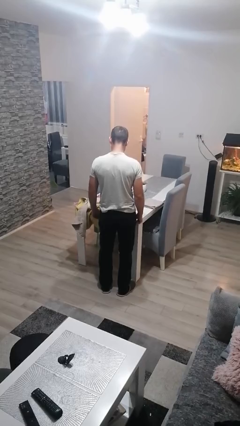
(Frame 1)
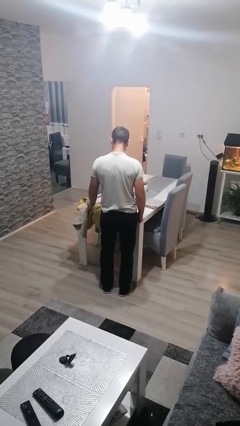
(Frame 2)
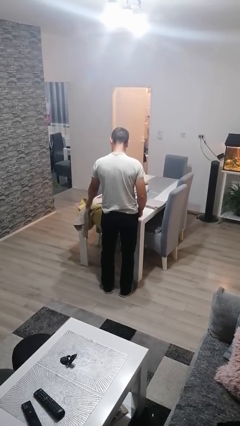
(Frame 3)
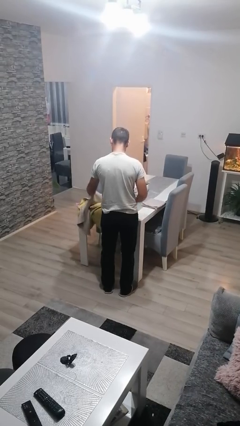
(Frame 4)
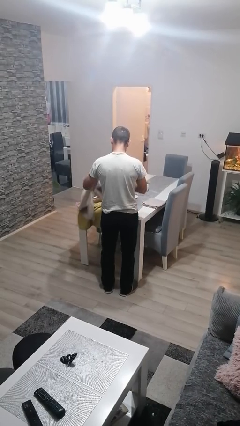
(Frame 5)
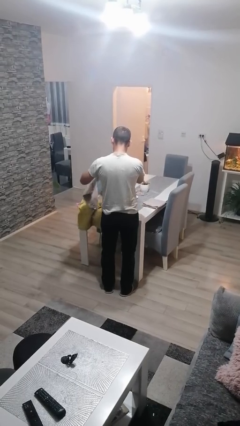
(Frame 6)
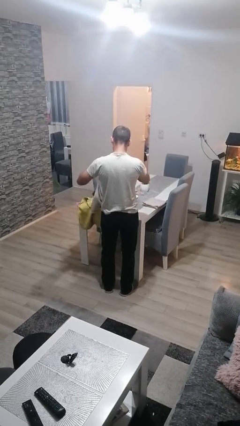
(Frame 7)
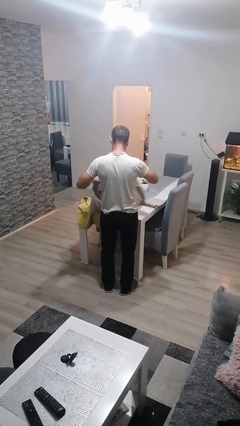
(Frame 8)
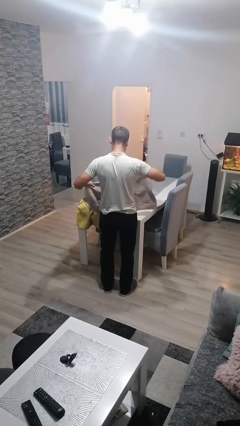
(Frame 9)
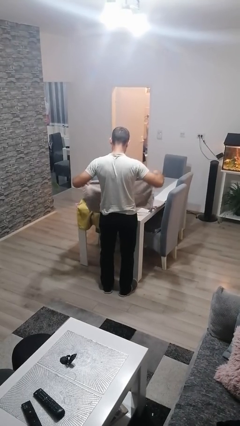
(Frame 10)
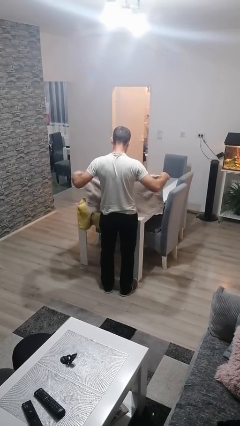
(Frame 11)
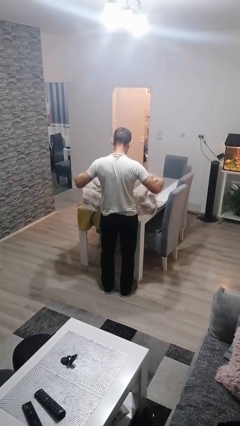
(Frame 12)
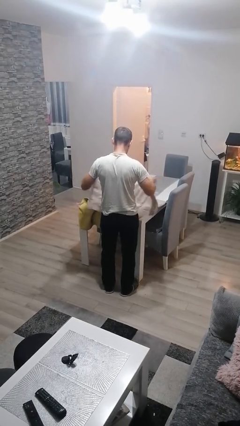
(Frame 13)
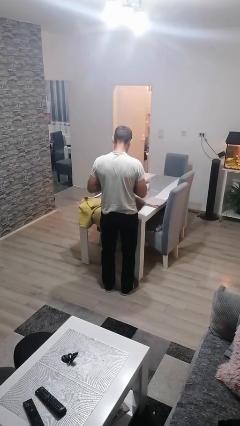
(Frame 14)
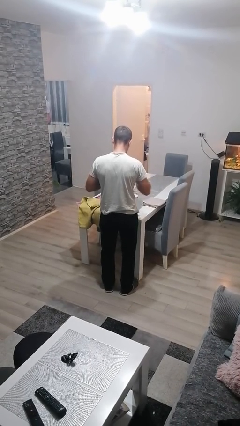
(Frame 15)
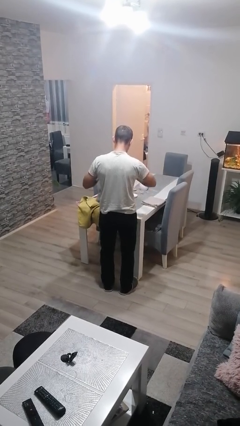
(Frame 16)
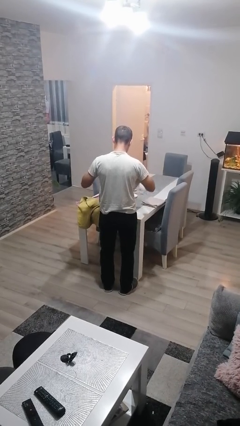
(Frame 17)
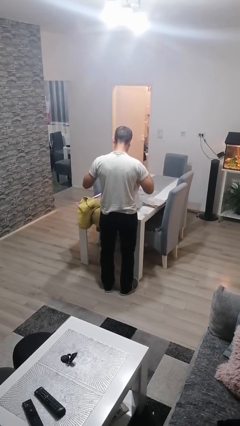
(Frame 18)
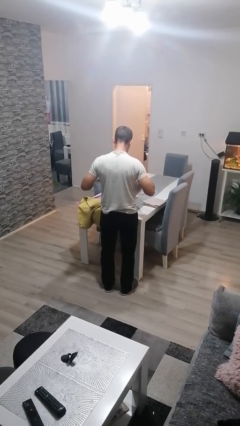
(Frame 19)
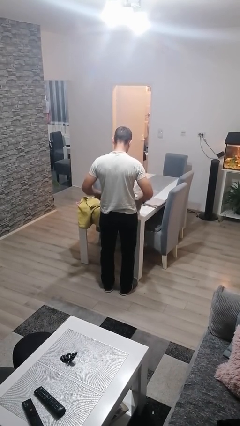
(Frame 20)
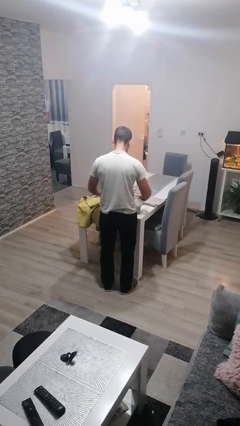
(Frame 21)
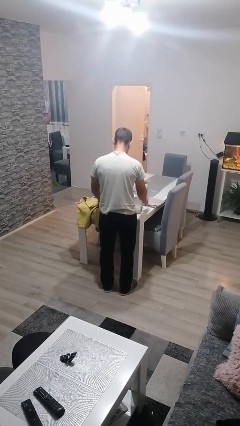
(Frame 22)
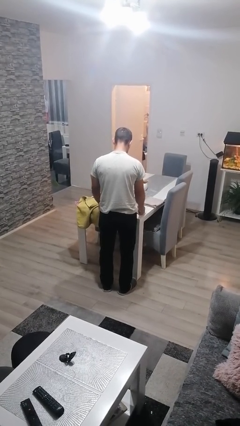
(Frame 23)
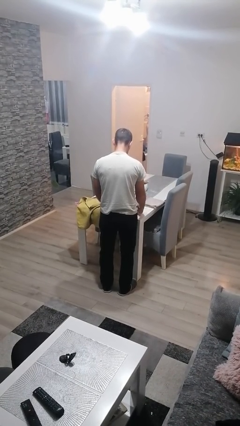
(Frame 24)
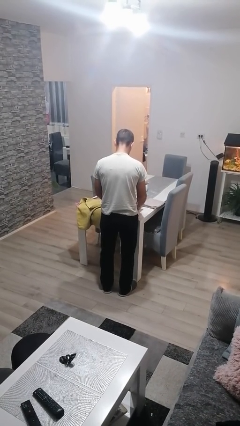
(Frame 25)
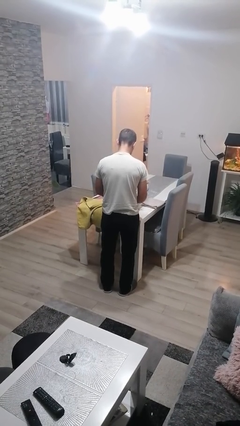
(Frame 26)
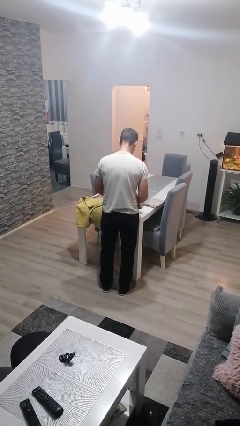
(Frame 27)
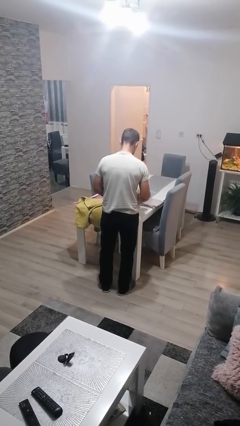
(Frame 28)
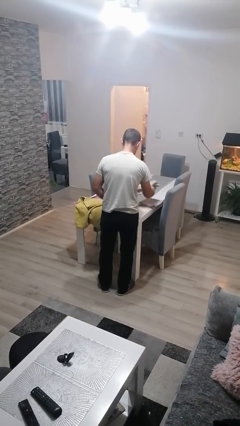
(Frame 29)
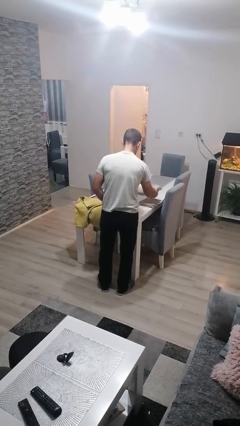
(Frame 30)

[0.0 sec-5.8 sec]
person folds towel

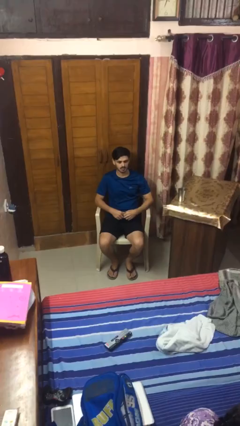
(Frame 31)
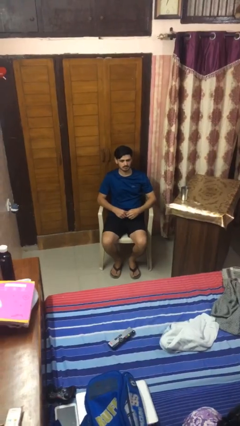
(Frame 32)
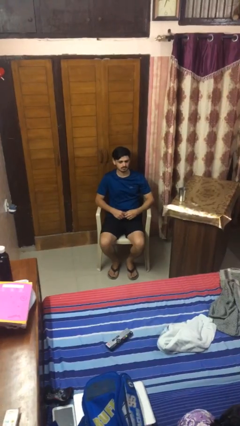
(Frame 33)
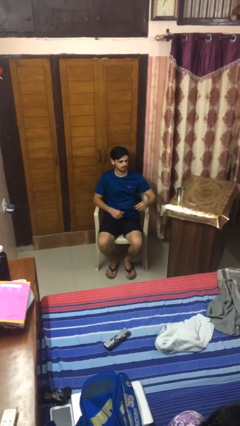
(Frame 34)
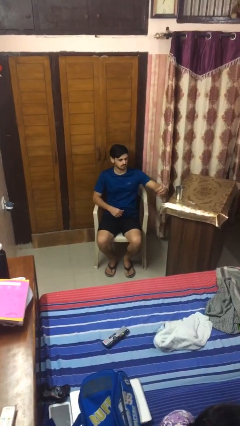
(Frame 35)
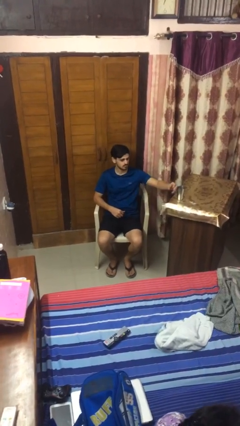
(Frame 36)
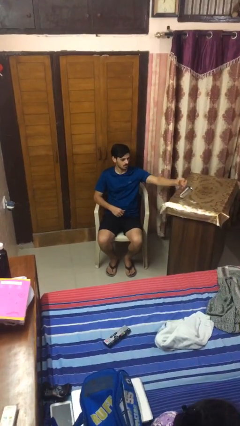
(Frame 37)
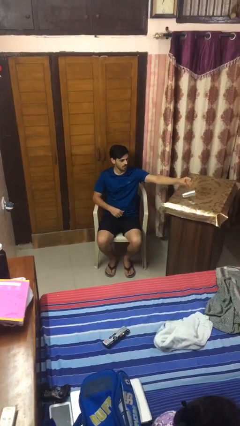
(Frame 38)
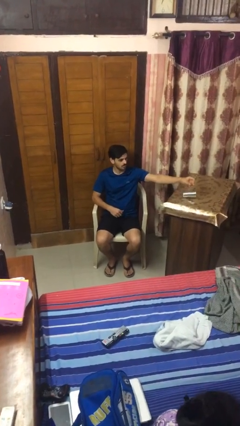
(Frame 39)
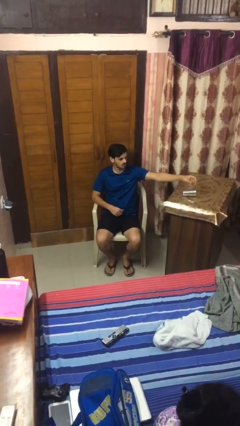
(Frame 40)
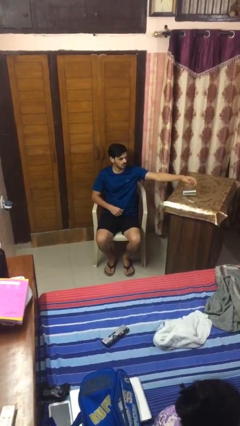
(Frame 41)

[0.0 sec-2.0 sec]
person knocks over glass

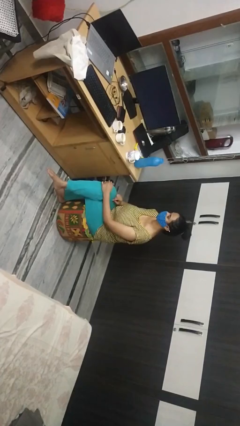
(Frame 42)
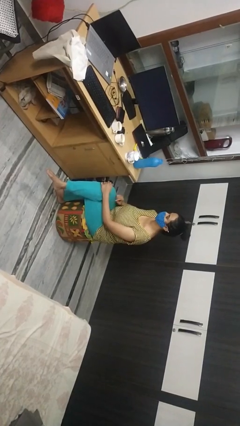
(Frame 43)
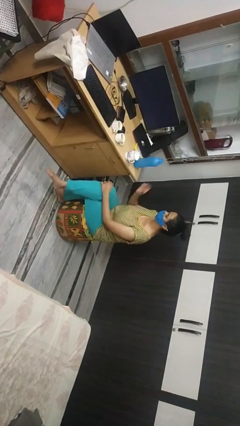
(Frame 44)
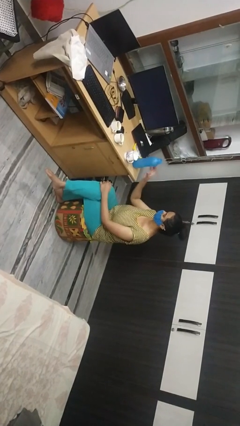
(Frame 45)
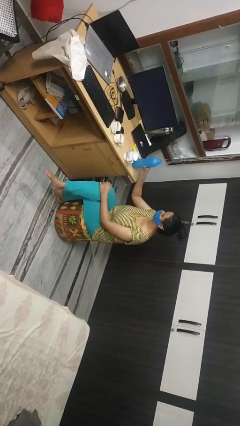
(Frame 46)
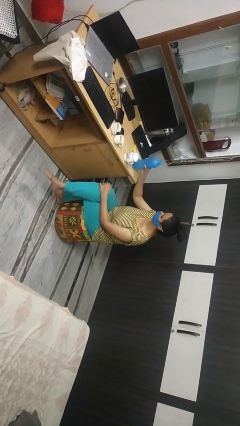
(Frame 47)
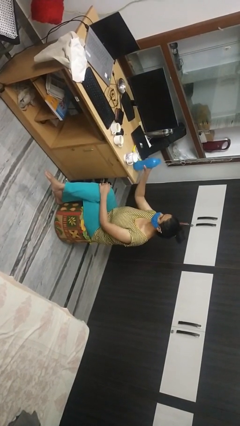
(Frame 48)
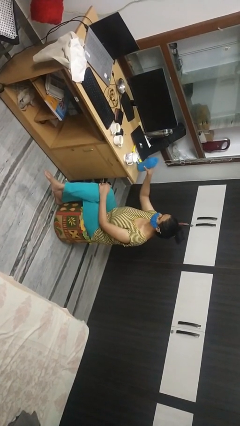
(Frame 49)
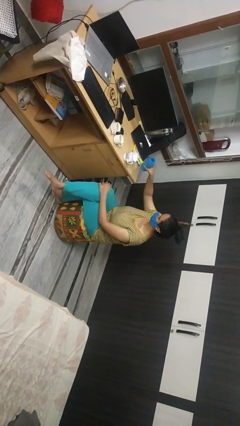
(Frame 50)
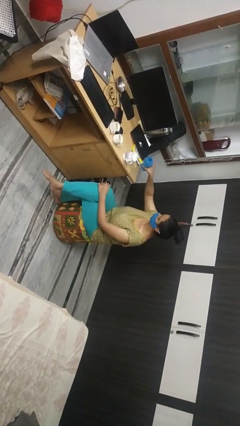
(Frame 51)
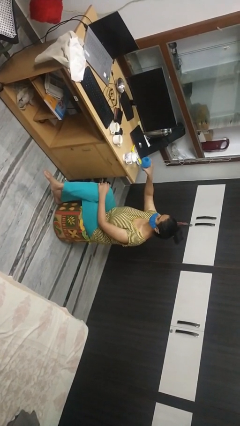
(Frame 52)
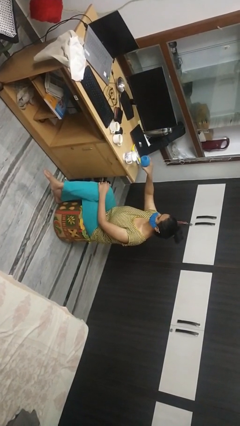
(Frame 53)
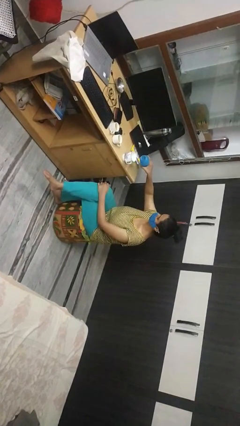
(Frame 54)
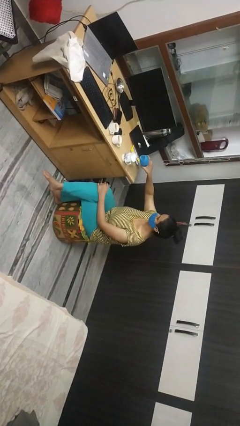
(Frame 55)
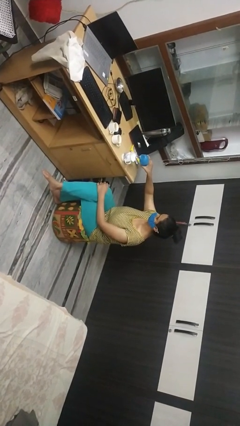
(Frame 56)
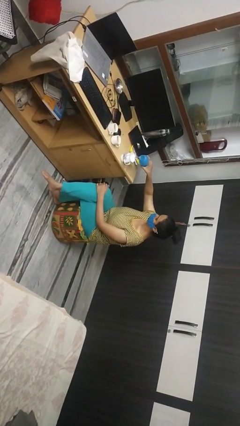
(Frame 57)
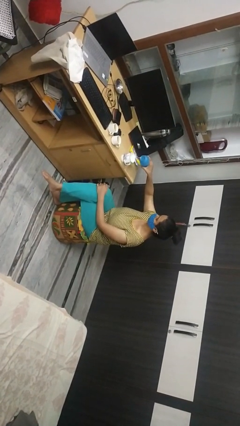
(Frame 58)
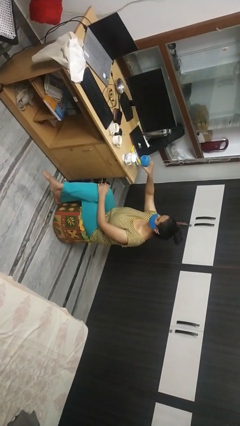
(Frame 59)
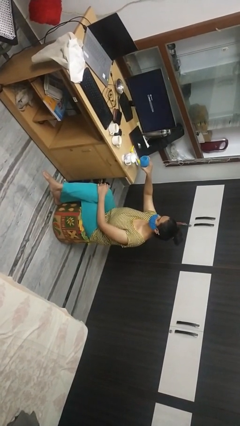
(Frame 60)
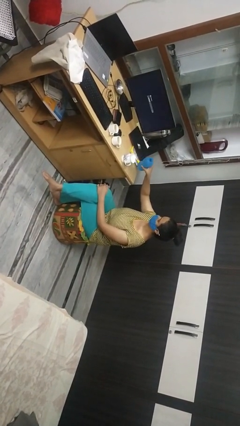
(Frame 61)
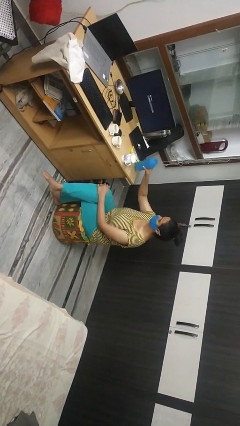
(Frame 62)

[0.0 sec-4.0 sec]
person pours liquid into cup

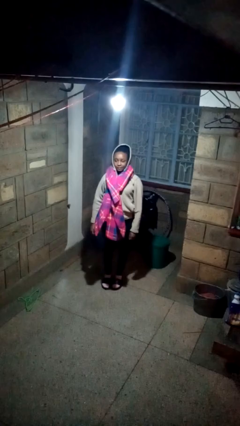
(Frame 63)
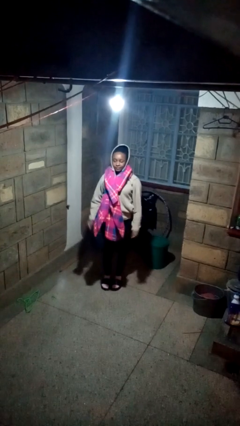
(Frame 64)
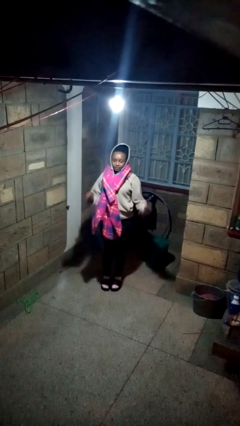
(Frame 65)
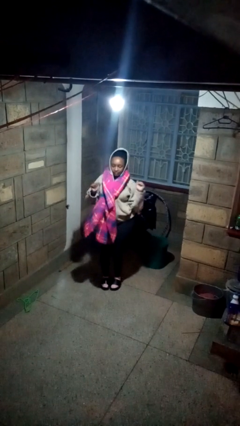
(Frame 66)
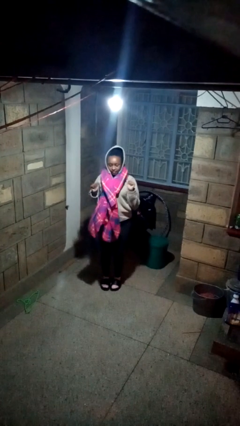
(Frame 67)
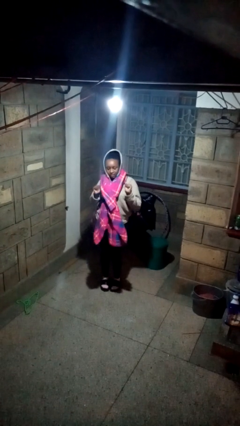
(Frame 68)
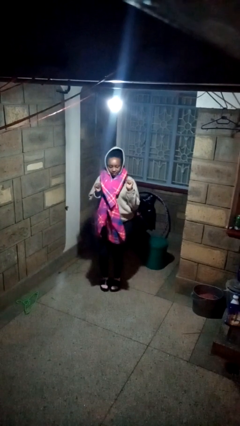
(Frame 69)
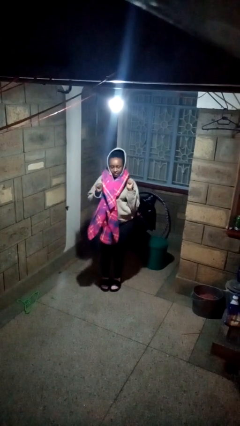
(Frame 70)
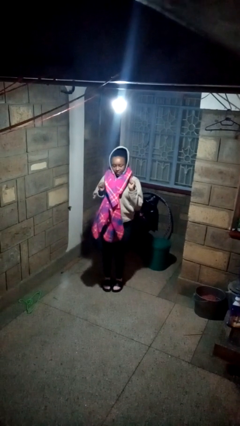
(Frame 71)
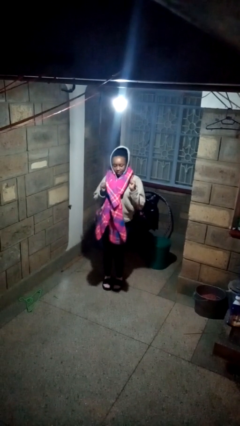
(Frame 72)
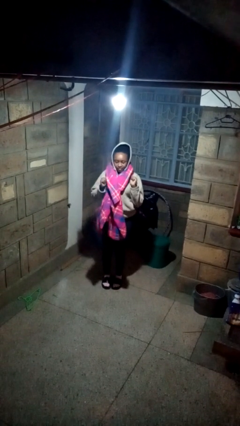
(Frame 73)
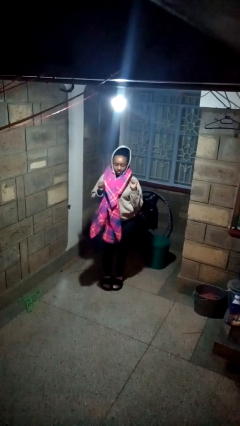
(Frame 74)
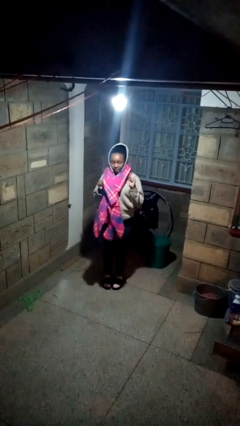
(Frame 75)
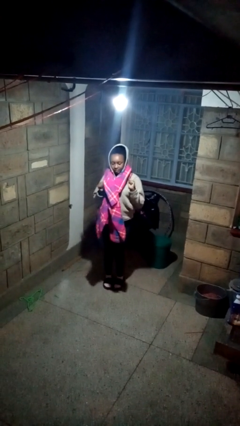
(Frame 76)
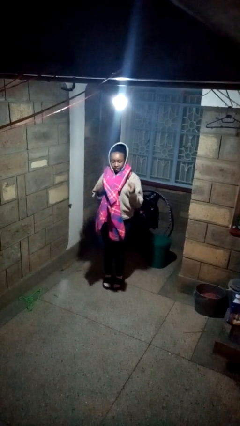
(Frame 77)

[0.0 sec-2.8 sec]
person wiggles hips

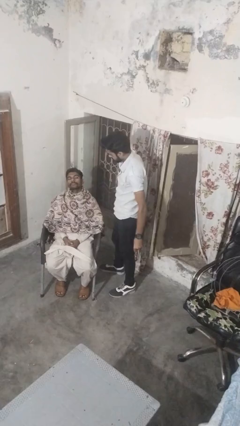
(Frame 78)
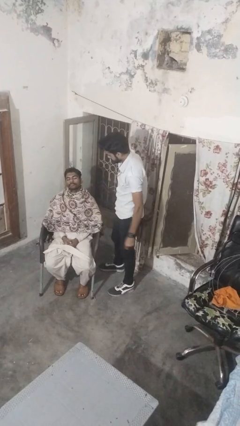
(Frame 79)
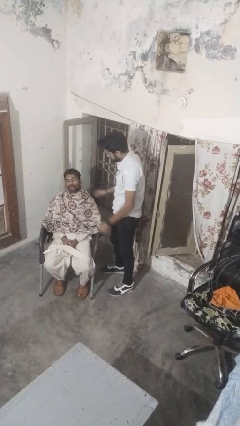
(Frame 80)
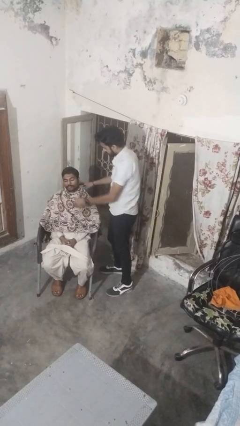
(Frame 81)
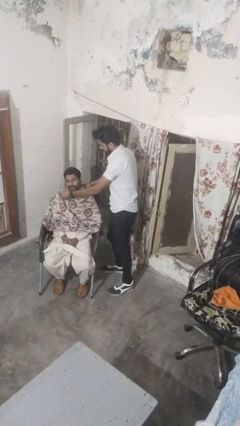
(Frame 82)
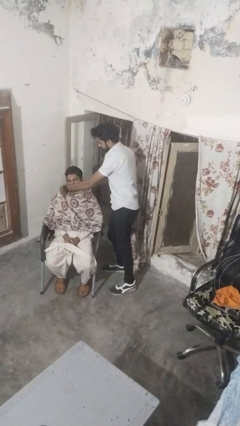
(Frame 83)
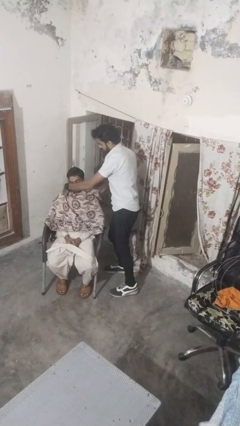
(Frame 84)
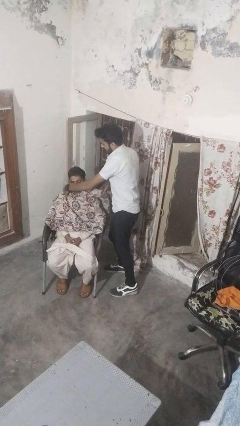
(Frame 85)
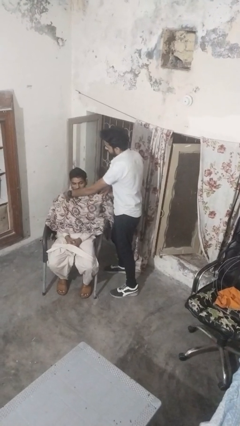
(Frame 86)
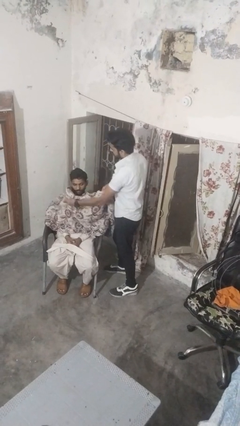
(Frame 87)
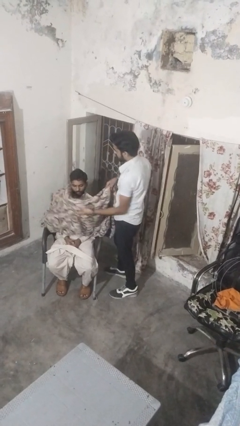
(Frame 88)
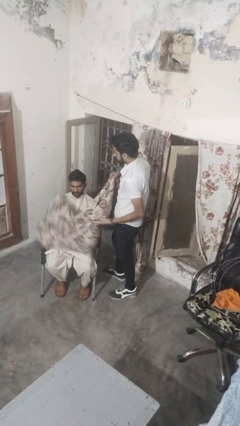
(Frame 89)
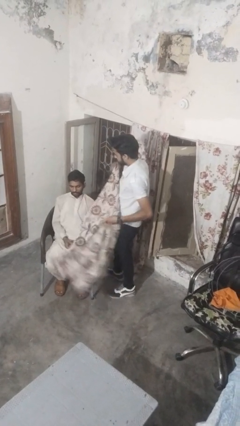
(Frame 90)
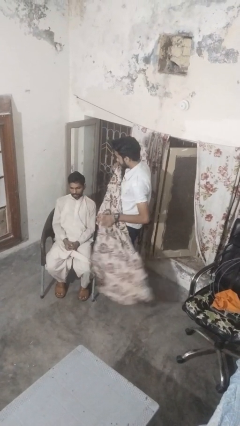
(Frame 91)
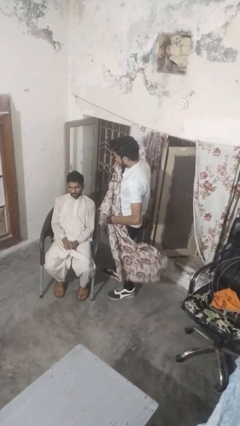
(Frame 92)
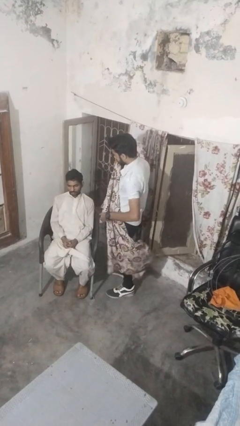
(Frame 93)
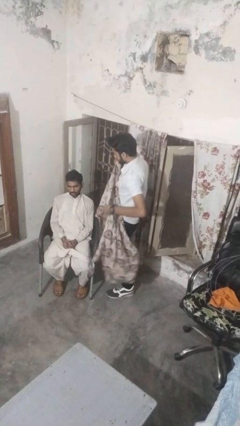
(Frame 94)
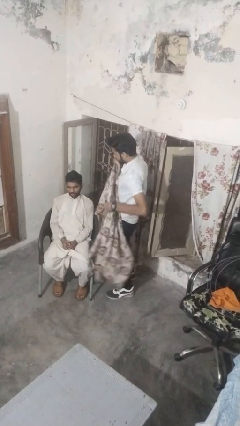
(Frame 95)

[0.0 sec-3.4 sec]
person uncovers friend with blanket
